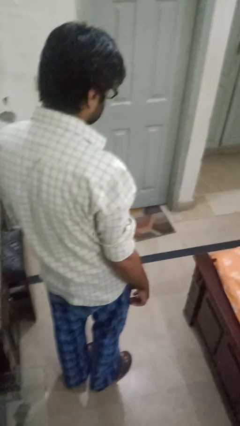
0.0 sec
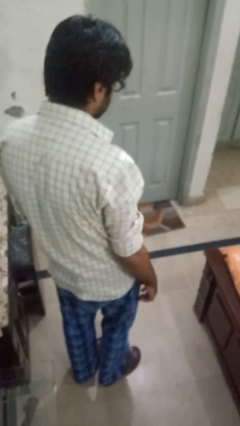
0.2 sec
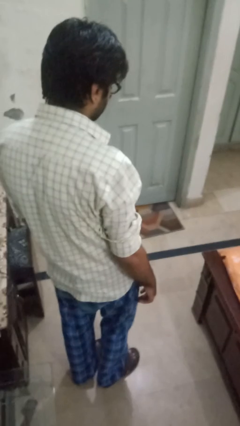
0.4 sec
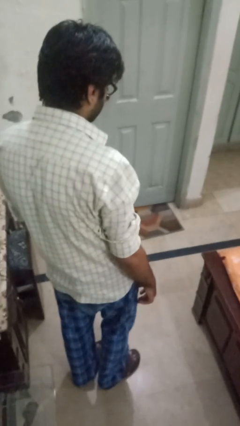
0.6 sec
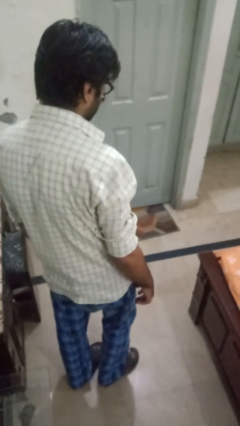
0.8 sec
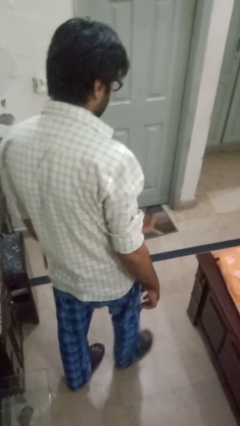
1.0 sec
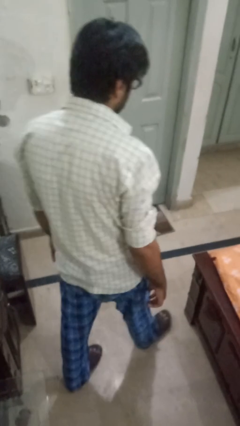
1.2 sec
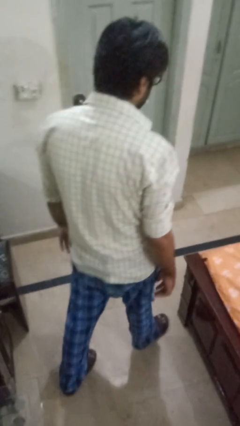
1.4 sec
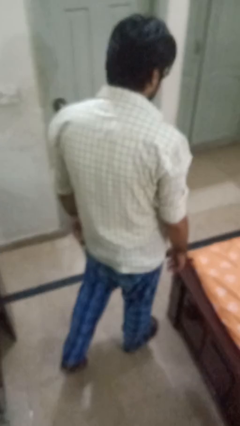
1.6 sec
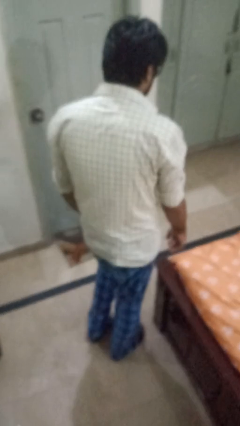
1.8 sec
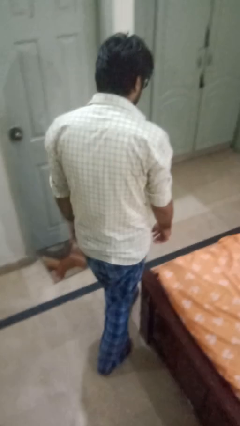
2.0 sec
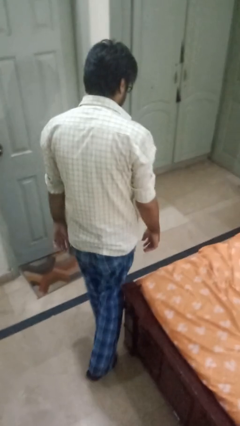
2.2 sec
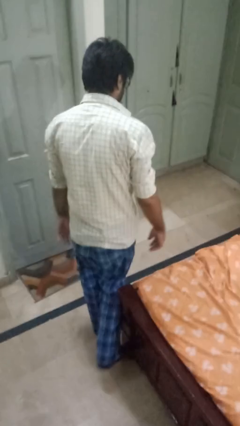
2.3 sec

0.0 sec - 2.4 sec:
person trips on object on floor

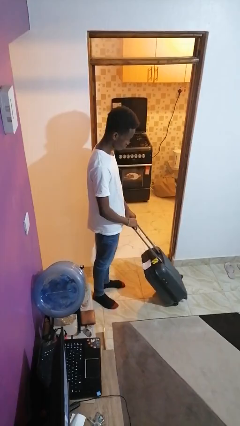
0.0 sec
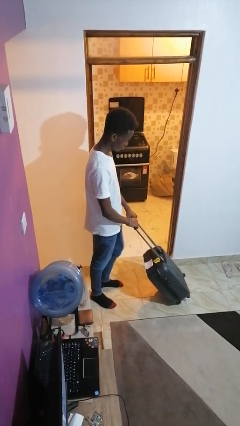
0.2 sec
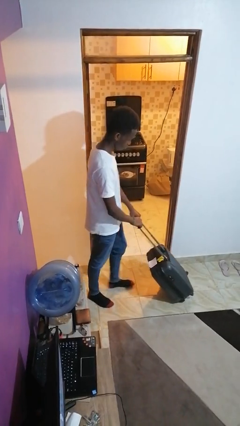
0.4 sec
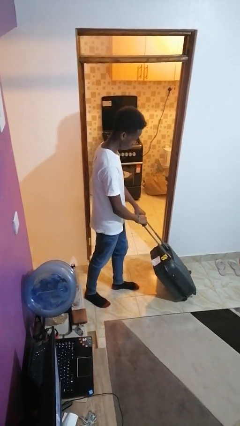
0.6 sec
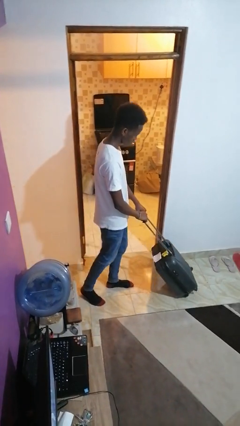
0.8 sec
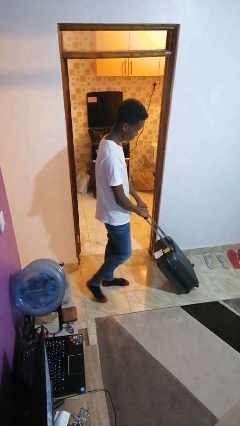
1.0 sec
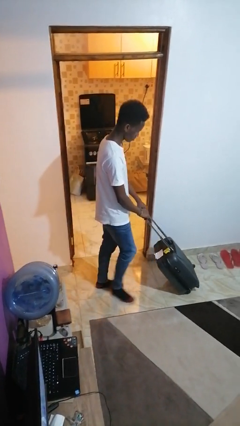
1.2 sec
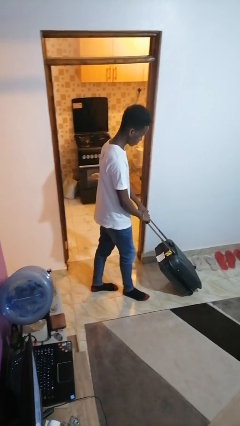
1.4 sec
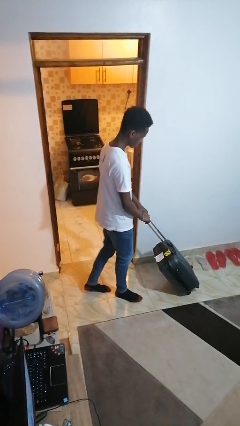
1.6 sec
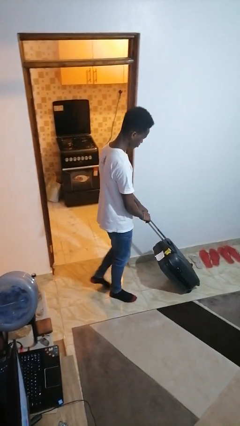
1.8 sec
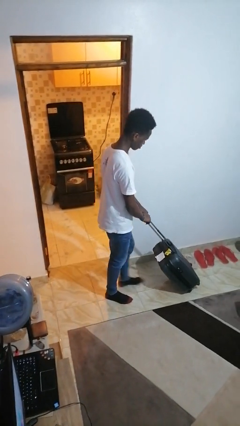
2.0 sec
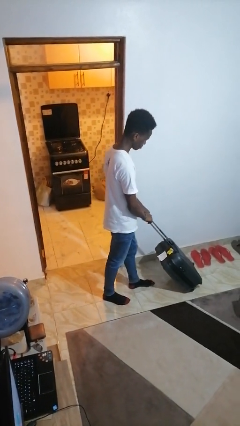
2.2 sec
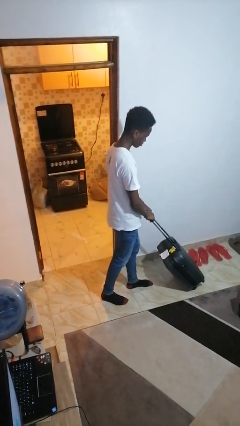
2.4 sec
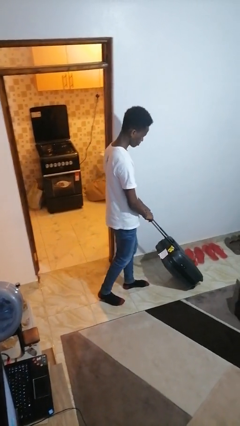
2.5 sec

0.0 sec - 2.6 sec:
person pushes wheeled cart

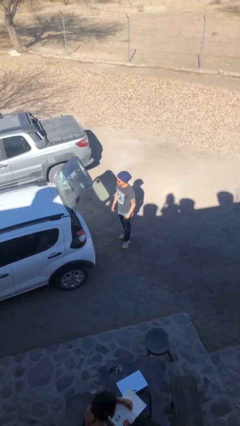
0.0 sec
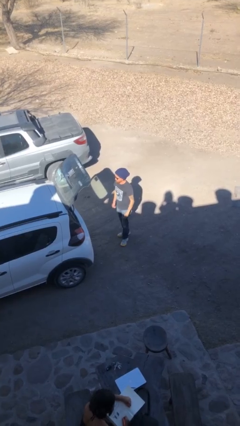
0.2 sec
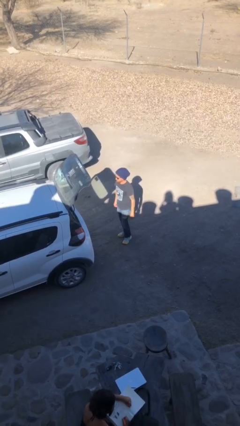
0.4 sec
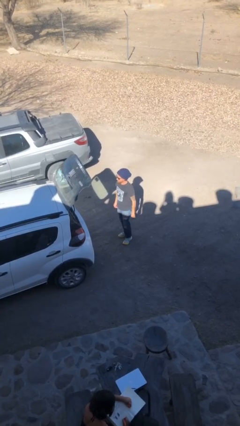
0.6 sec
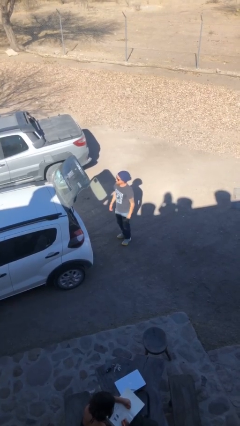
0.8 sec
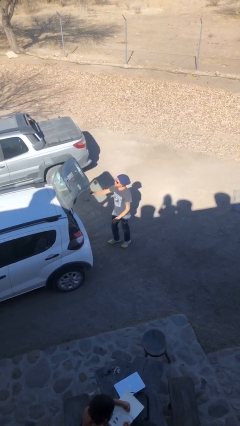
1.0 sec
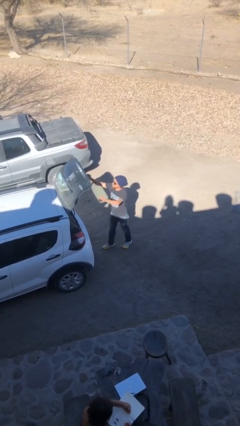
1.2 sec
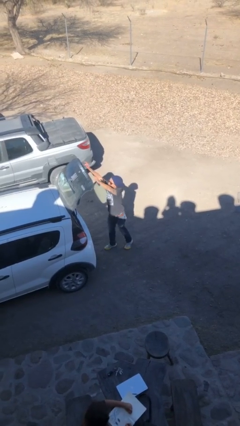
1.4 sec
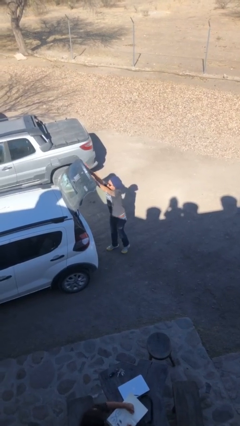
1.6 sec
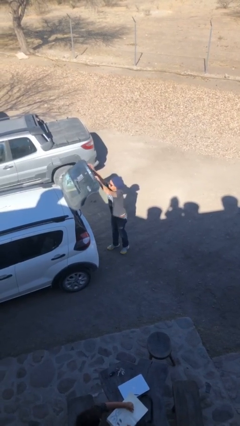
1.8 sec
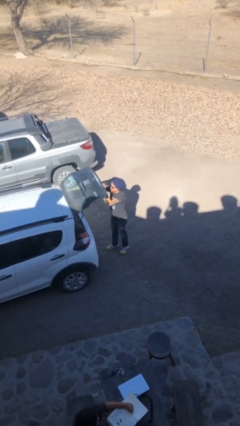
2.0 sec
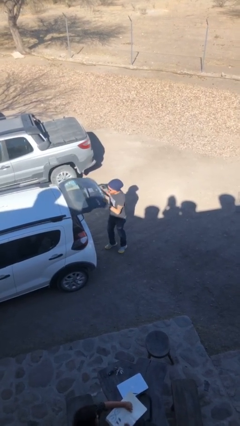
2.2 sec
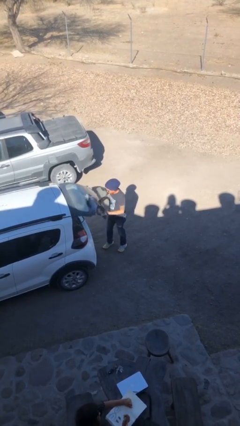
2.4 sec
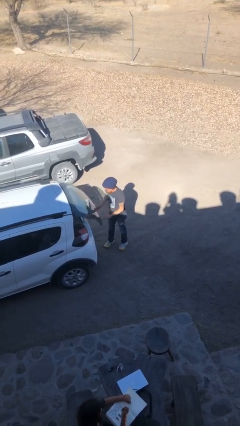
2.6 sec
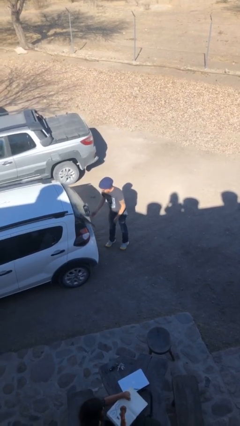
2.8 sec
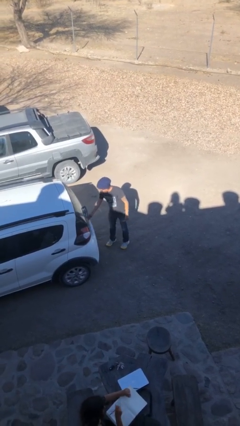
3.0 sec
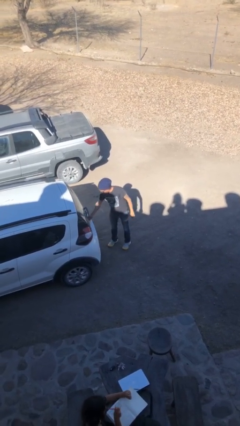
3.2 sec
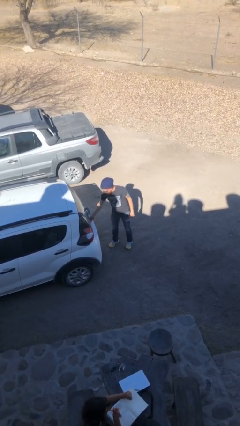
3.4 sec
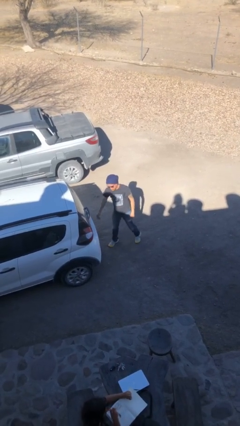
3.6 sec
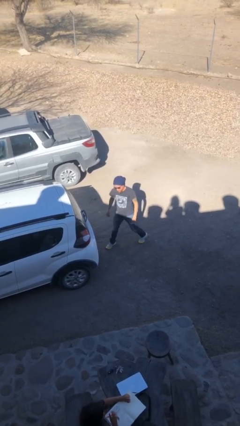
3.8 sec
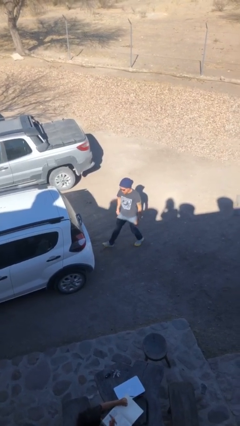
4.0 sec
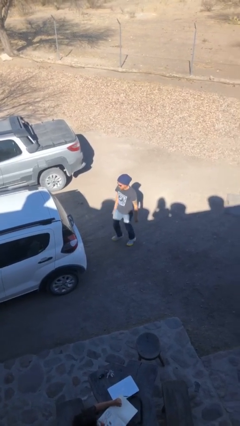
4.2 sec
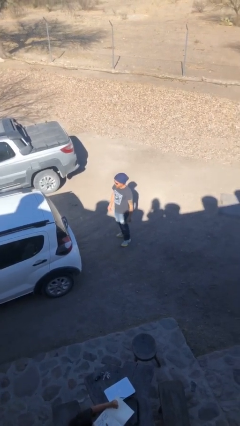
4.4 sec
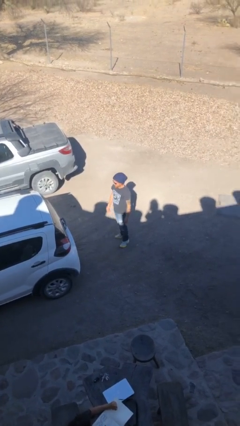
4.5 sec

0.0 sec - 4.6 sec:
person closes car trunk

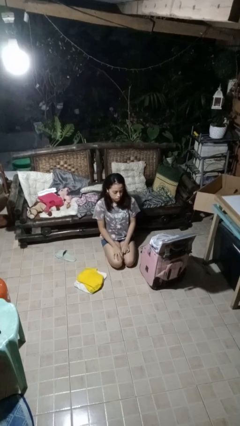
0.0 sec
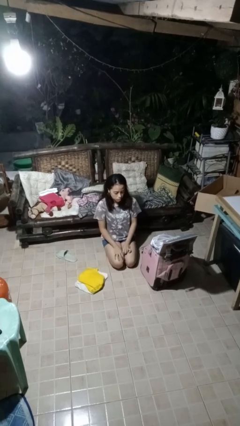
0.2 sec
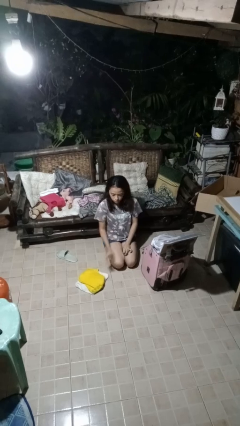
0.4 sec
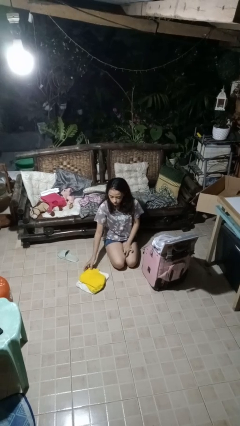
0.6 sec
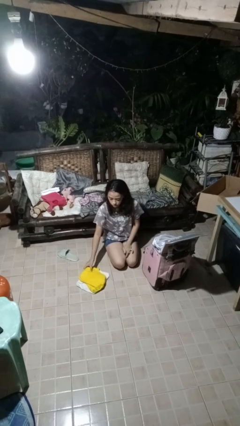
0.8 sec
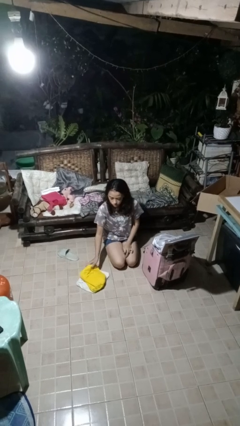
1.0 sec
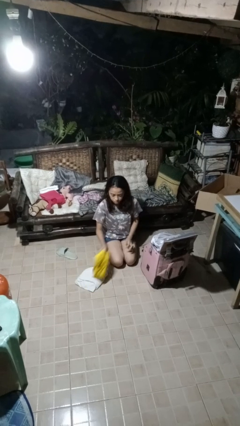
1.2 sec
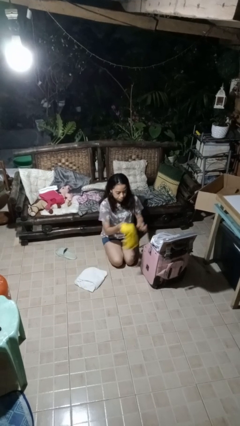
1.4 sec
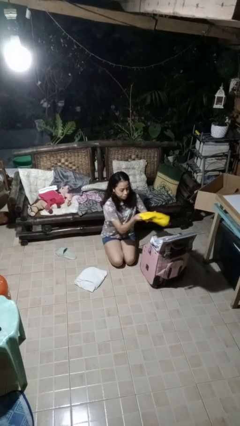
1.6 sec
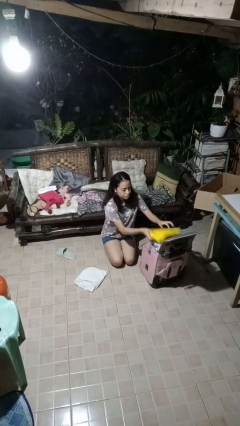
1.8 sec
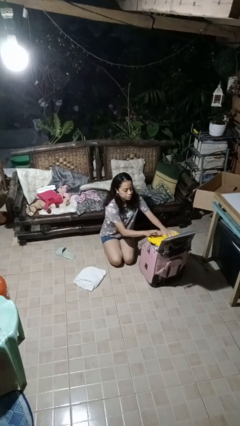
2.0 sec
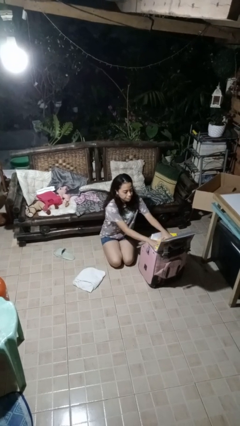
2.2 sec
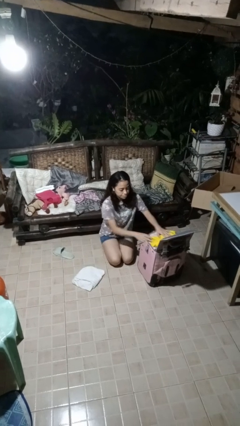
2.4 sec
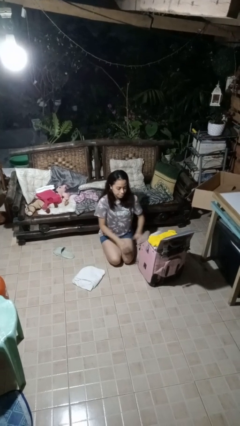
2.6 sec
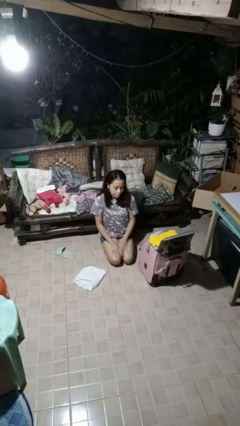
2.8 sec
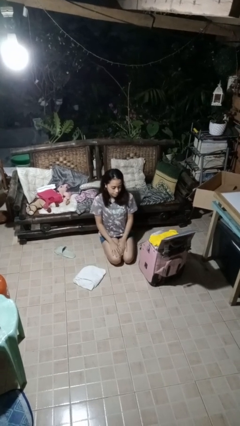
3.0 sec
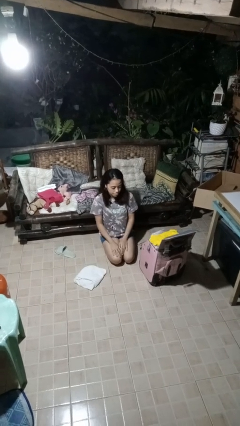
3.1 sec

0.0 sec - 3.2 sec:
person loads clothes into suitcase

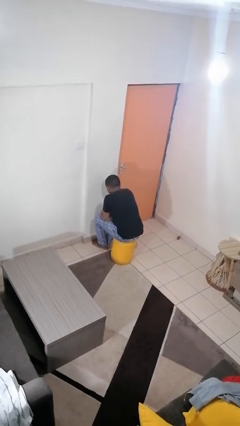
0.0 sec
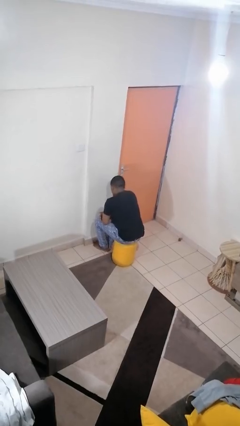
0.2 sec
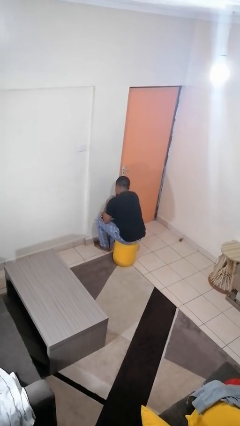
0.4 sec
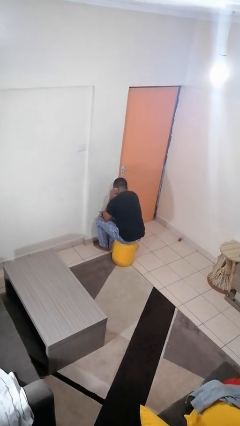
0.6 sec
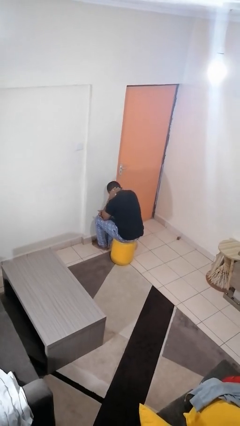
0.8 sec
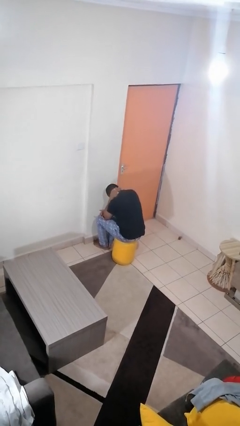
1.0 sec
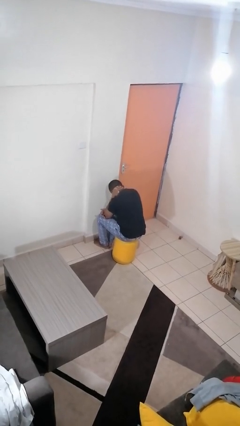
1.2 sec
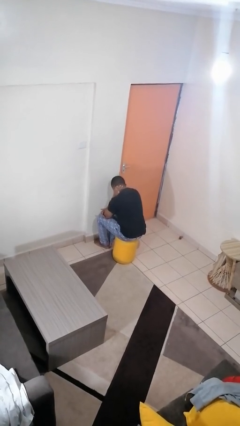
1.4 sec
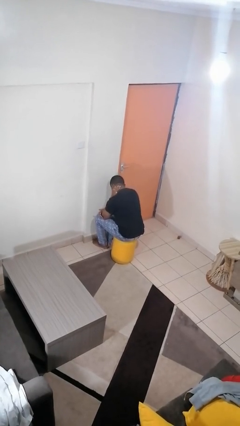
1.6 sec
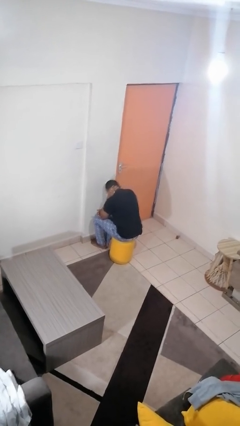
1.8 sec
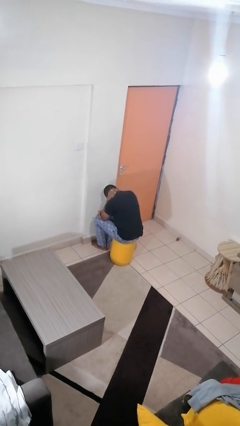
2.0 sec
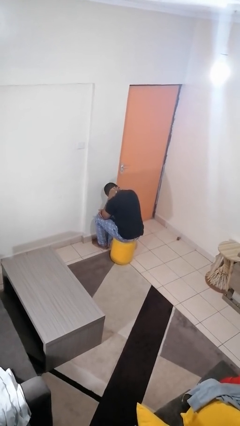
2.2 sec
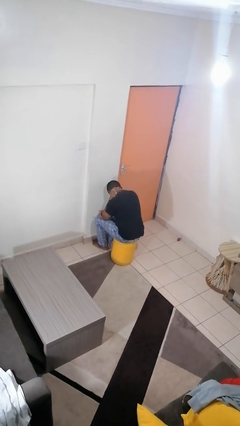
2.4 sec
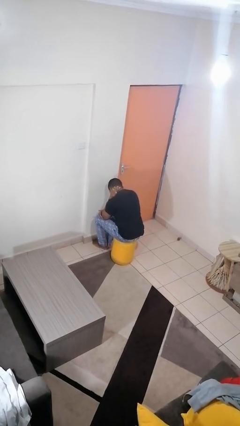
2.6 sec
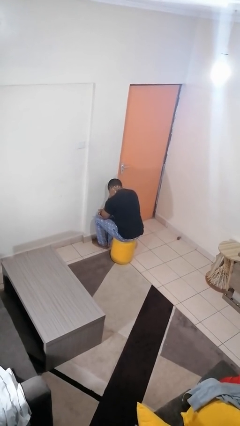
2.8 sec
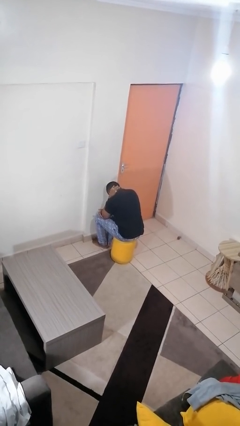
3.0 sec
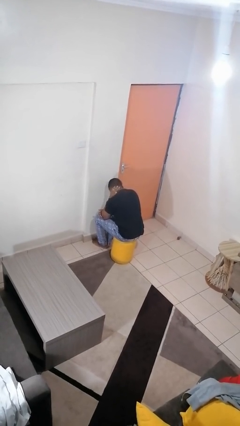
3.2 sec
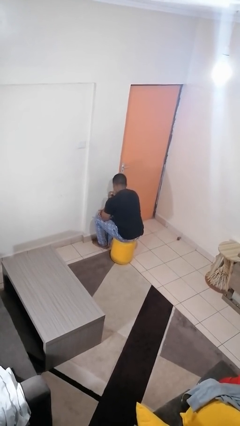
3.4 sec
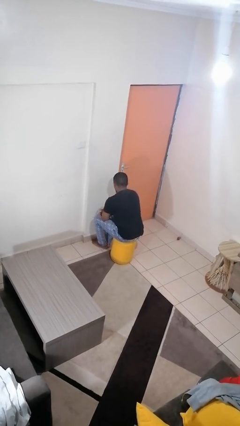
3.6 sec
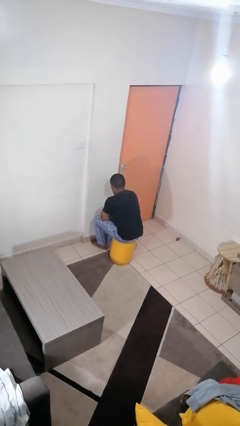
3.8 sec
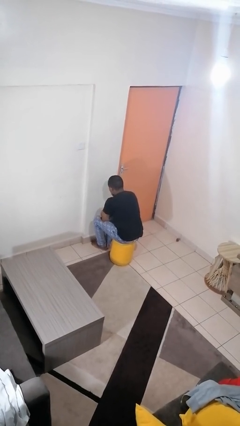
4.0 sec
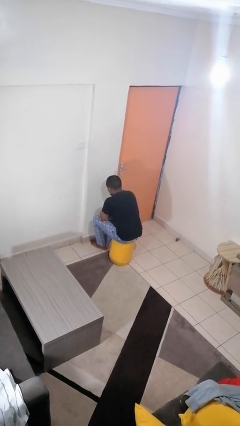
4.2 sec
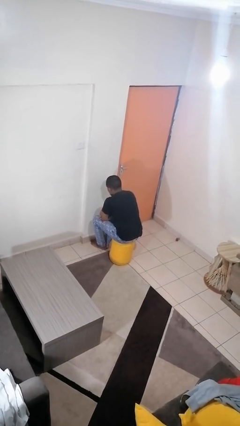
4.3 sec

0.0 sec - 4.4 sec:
person rubs neck
